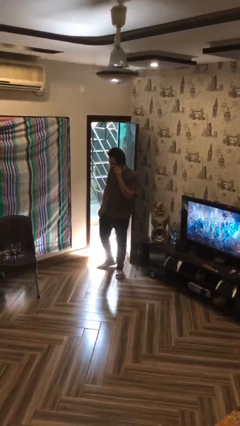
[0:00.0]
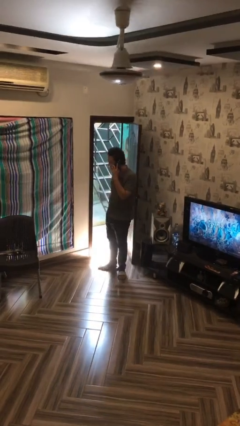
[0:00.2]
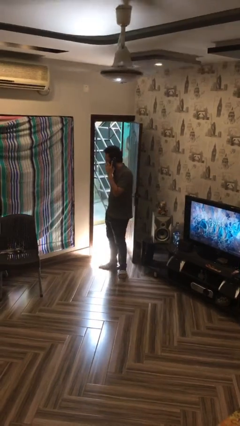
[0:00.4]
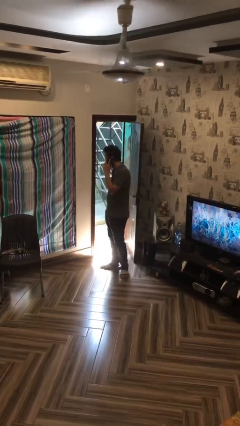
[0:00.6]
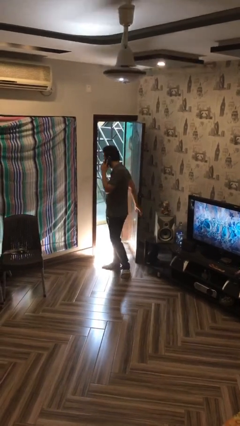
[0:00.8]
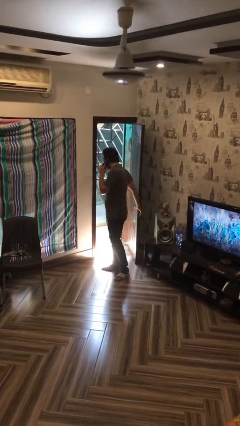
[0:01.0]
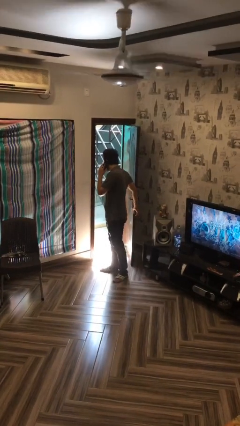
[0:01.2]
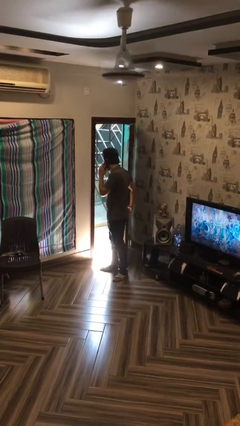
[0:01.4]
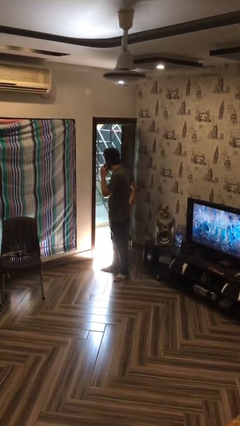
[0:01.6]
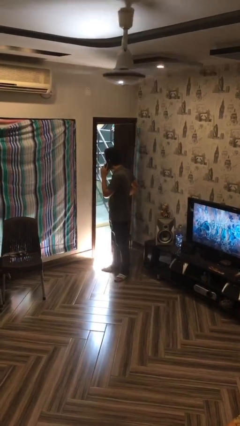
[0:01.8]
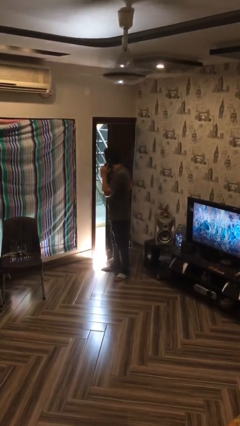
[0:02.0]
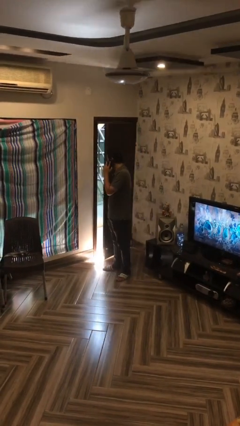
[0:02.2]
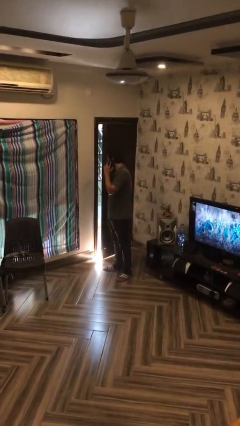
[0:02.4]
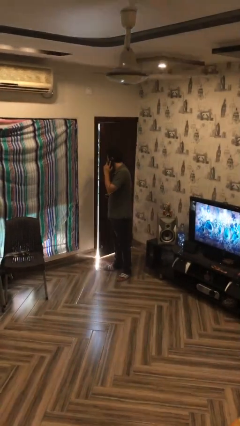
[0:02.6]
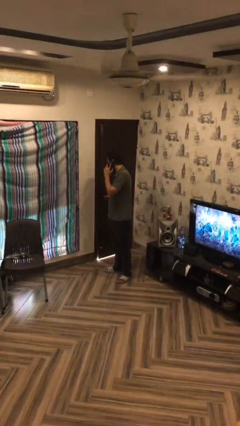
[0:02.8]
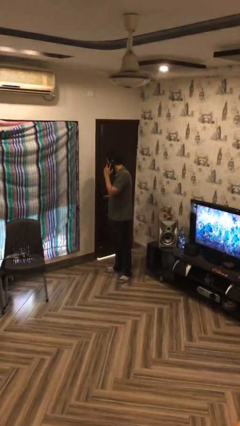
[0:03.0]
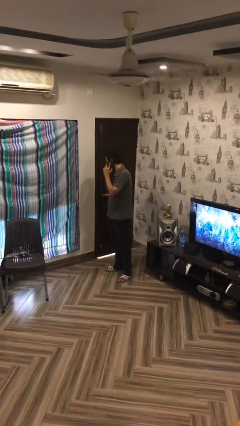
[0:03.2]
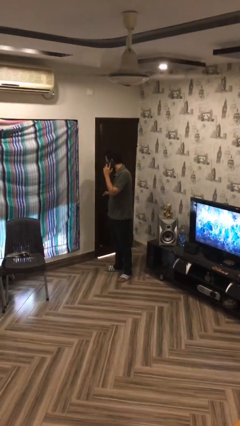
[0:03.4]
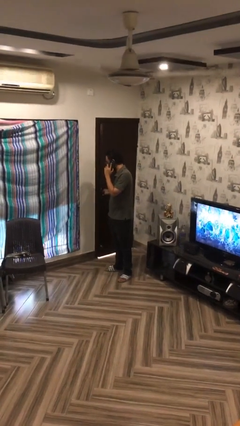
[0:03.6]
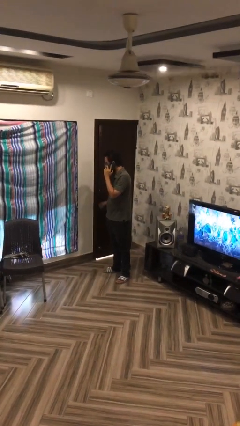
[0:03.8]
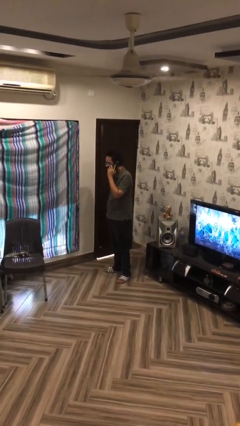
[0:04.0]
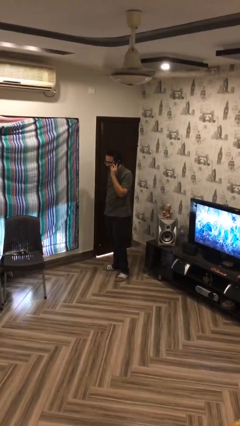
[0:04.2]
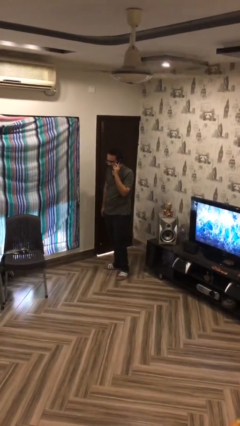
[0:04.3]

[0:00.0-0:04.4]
person closes facility door

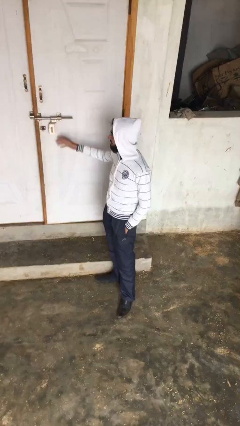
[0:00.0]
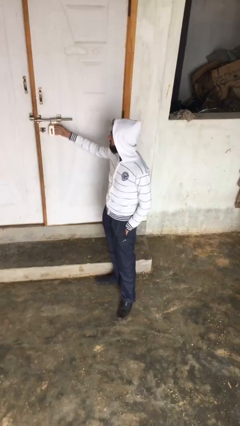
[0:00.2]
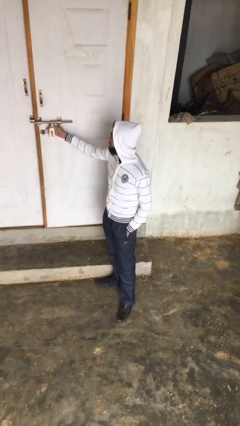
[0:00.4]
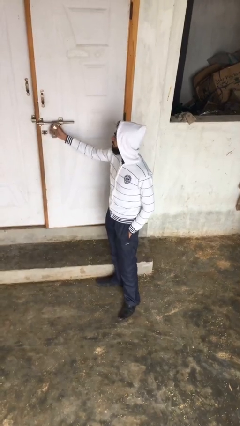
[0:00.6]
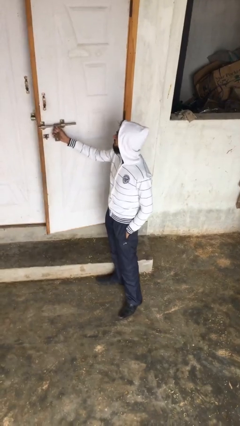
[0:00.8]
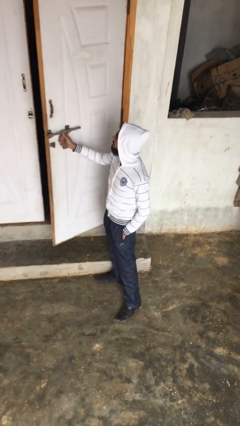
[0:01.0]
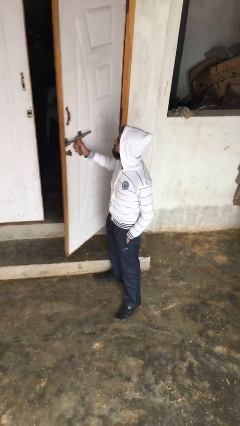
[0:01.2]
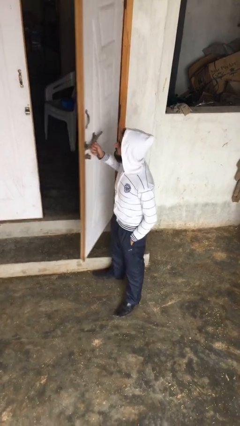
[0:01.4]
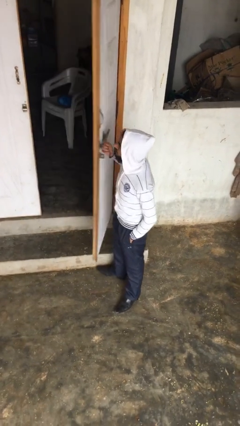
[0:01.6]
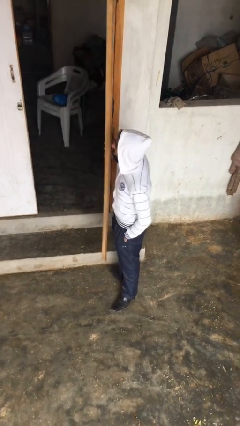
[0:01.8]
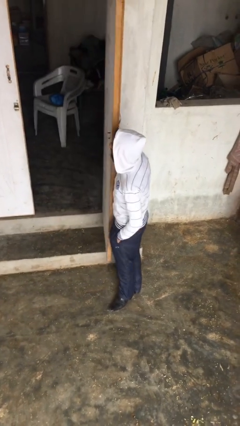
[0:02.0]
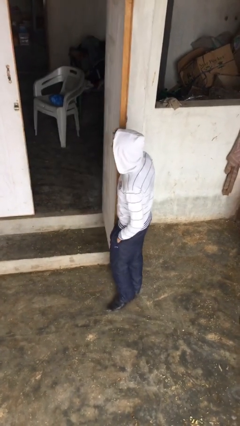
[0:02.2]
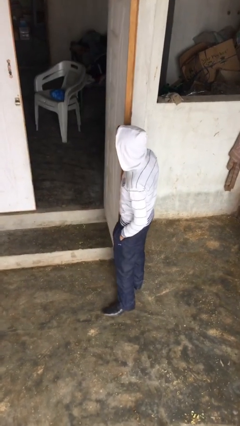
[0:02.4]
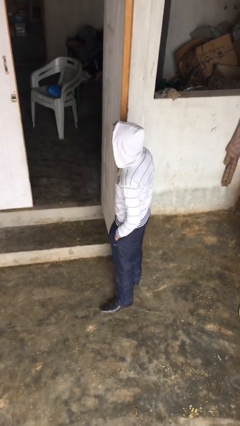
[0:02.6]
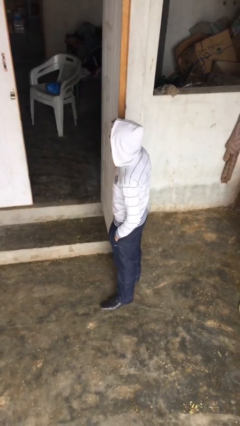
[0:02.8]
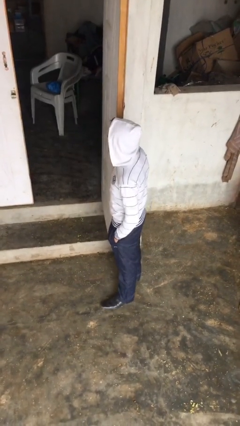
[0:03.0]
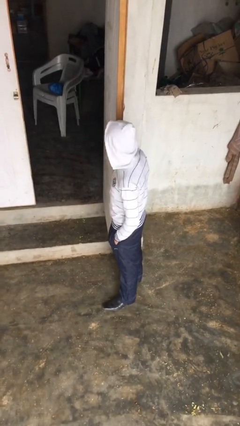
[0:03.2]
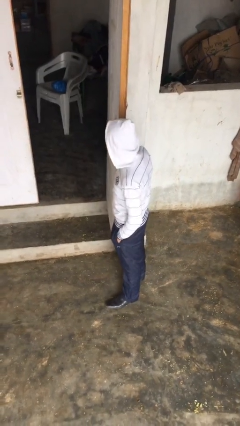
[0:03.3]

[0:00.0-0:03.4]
person opens facility door

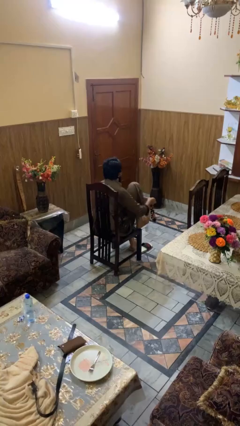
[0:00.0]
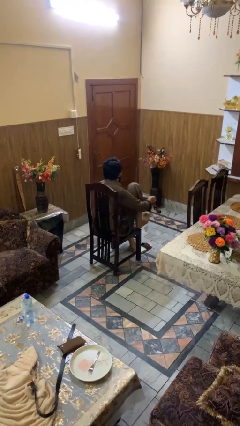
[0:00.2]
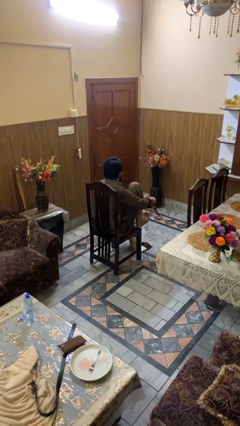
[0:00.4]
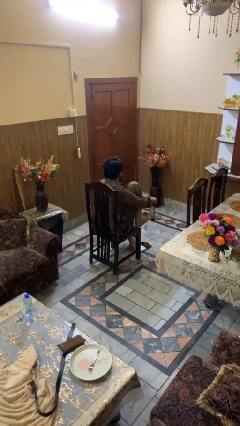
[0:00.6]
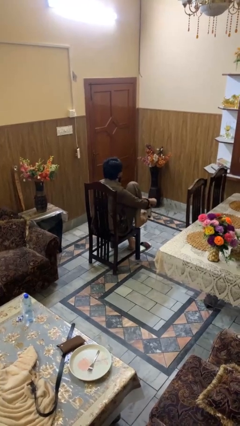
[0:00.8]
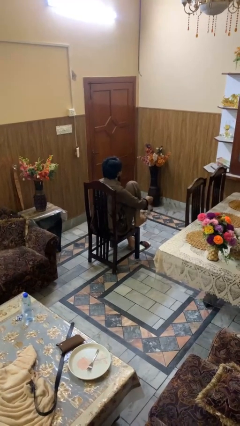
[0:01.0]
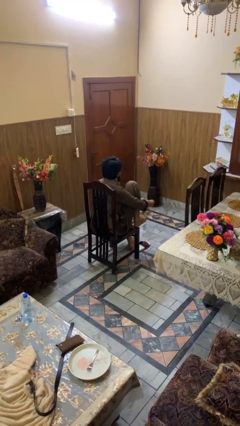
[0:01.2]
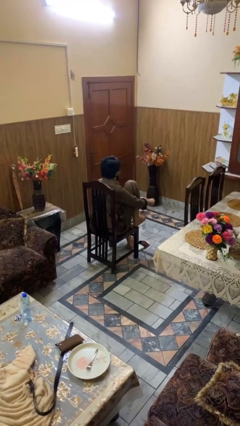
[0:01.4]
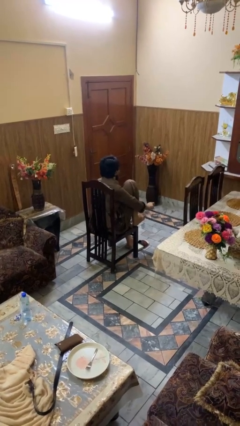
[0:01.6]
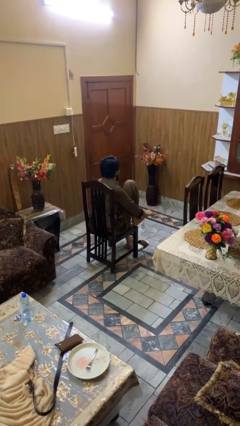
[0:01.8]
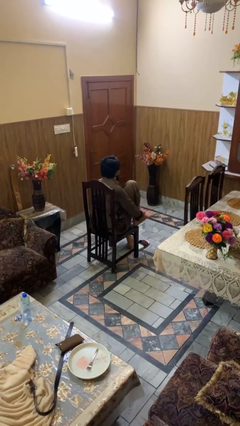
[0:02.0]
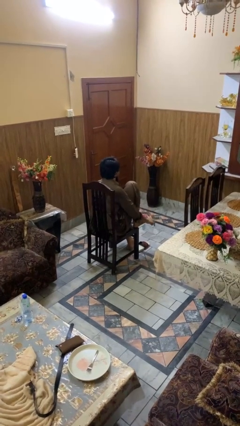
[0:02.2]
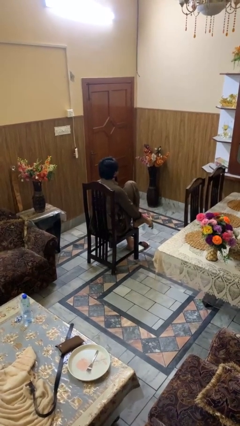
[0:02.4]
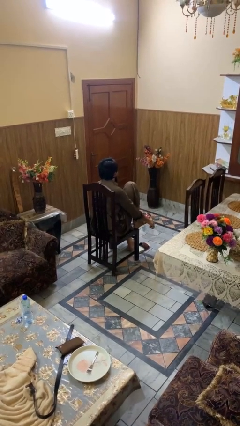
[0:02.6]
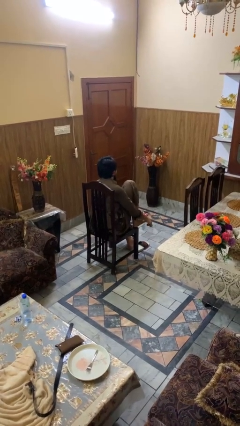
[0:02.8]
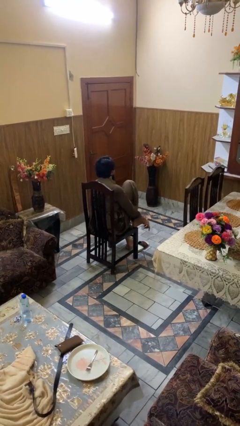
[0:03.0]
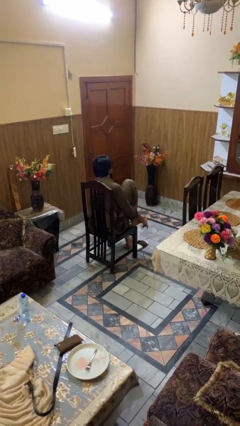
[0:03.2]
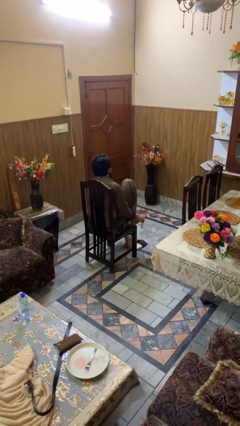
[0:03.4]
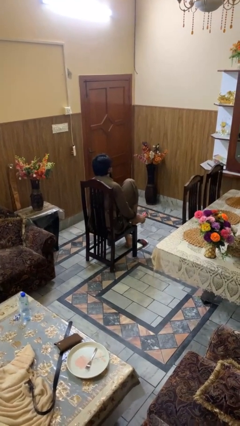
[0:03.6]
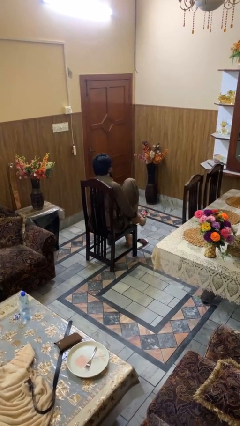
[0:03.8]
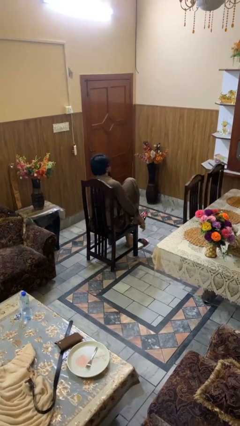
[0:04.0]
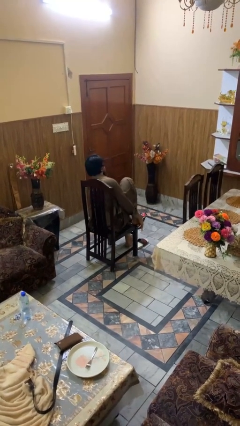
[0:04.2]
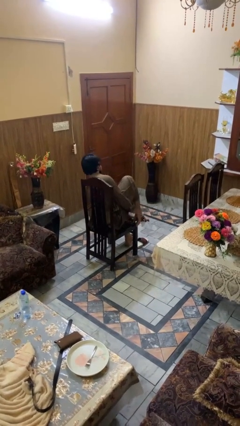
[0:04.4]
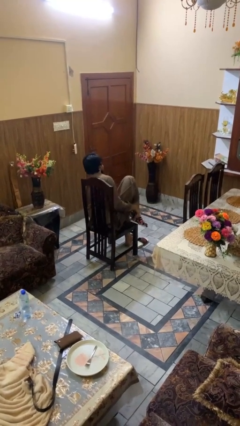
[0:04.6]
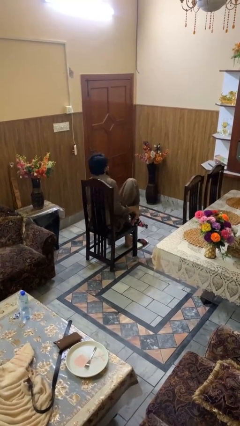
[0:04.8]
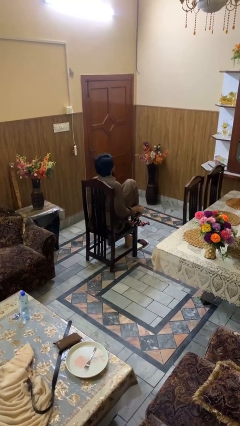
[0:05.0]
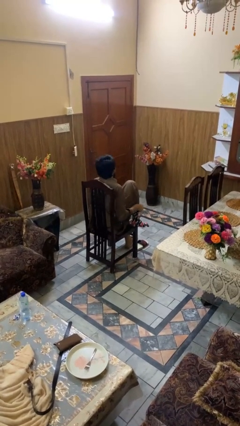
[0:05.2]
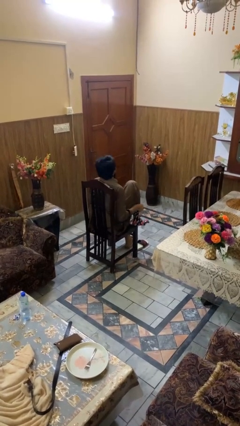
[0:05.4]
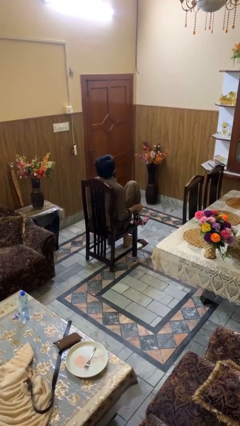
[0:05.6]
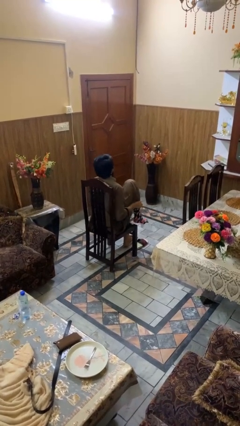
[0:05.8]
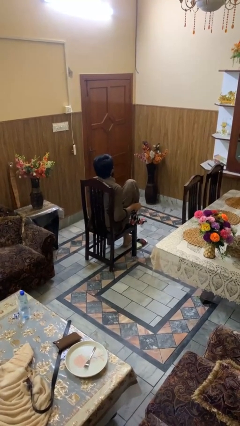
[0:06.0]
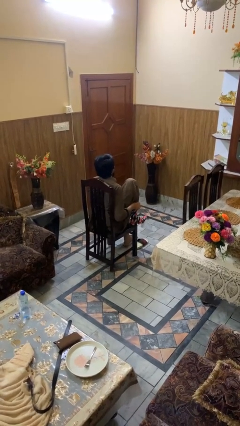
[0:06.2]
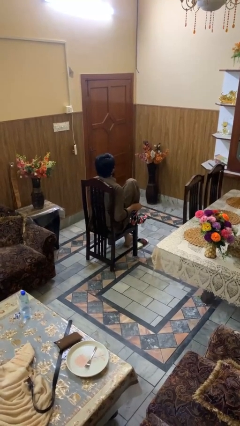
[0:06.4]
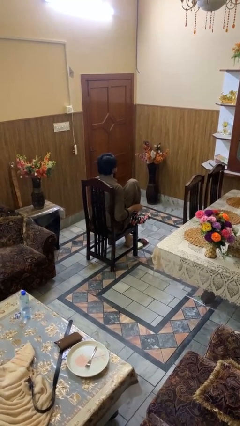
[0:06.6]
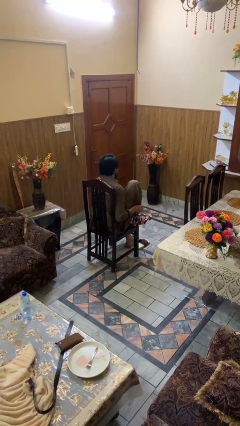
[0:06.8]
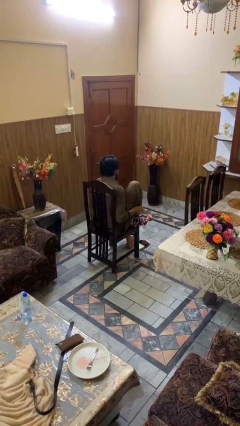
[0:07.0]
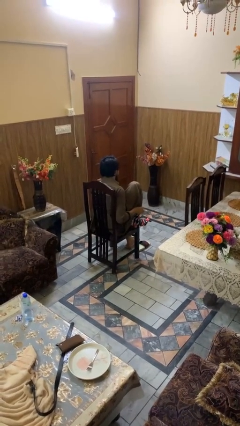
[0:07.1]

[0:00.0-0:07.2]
person puts on socks

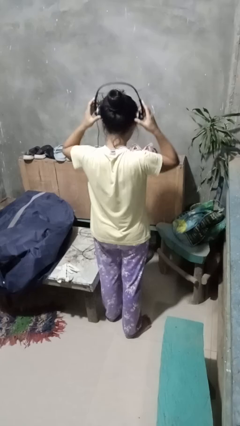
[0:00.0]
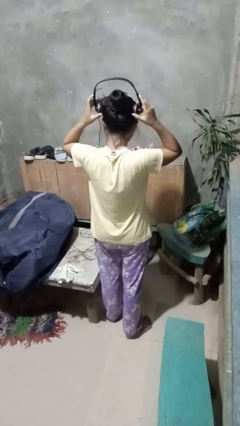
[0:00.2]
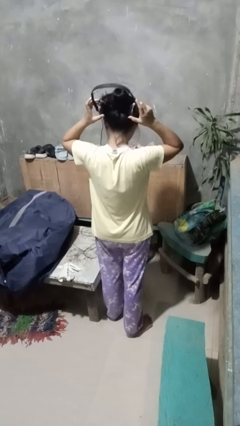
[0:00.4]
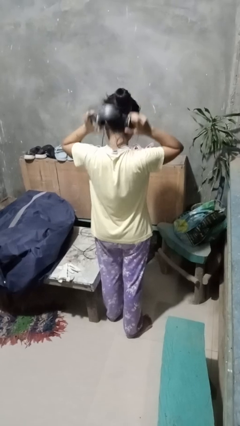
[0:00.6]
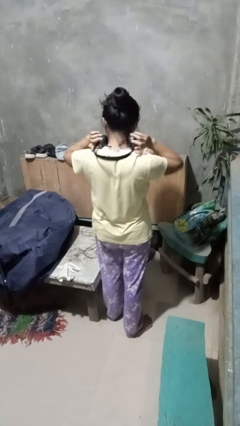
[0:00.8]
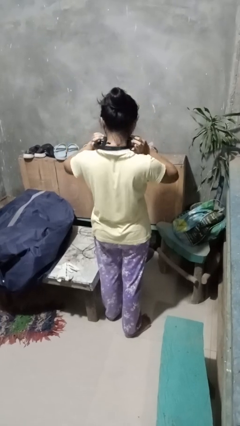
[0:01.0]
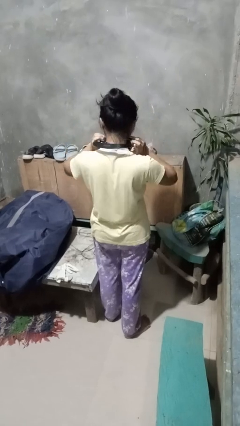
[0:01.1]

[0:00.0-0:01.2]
person takes off headphones

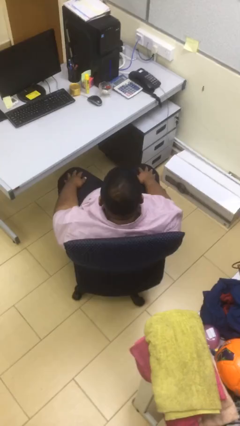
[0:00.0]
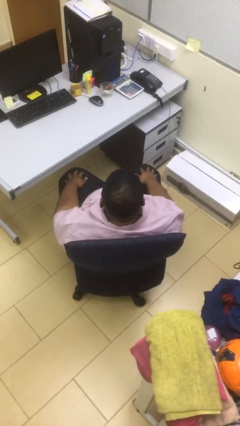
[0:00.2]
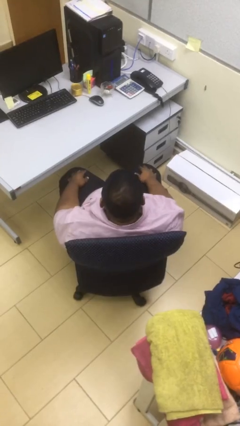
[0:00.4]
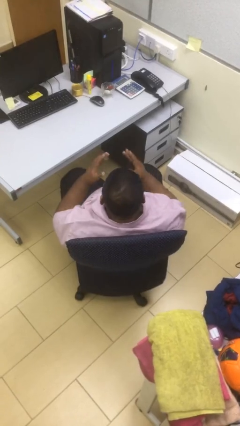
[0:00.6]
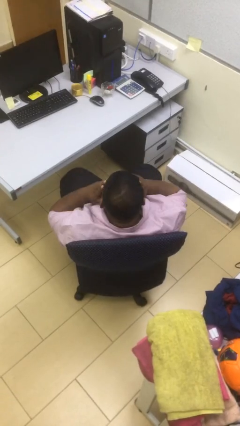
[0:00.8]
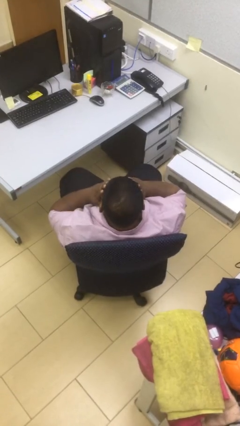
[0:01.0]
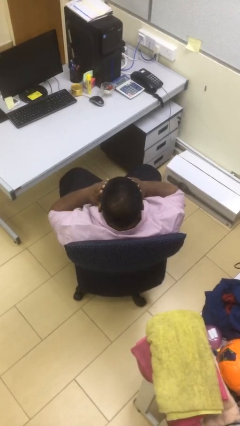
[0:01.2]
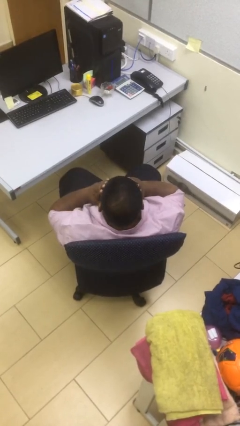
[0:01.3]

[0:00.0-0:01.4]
person covers face with hands
